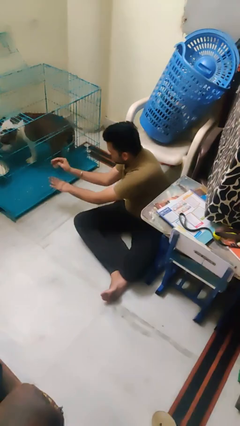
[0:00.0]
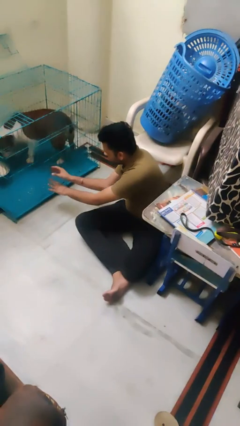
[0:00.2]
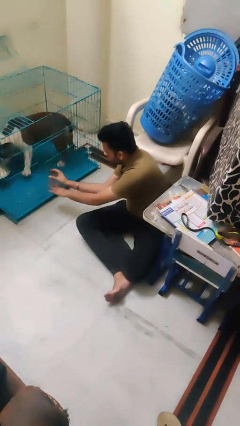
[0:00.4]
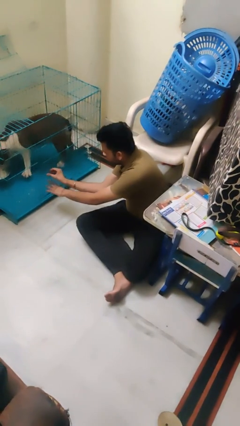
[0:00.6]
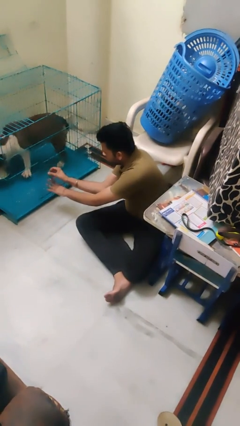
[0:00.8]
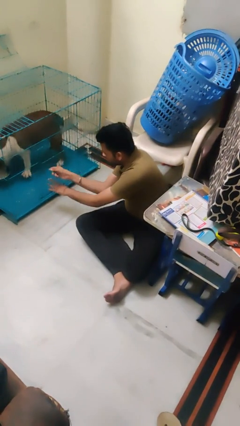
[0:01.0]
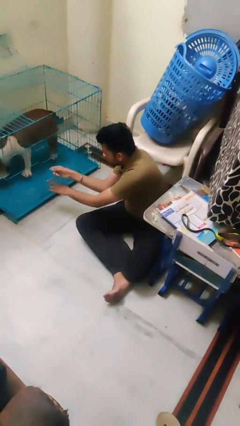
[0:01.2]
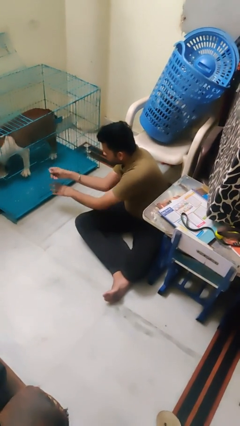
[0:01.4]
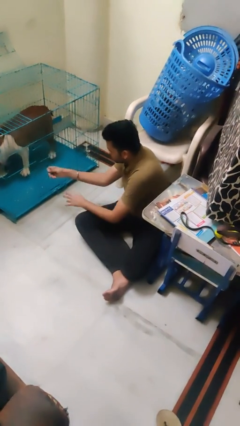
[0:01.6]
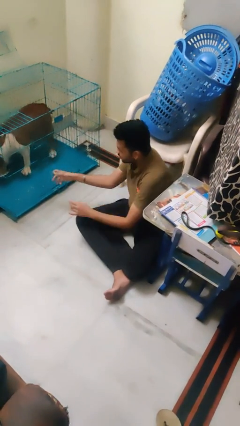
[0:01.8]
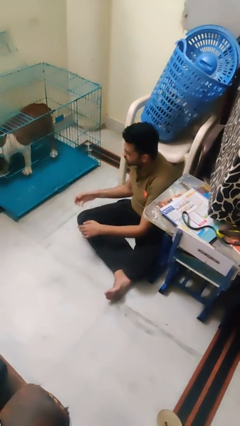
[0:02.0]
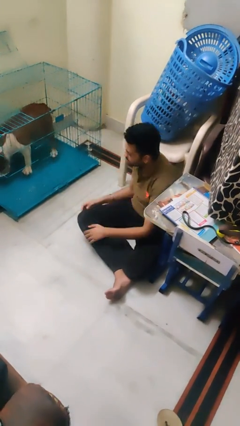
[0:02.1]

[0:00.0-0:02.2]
person crates dog

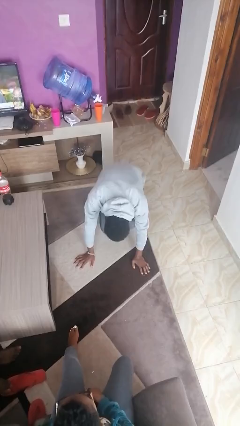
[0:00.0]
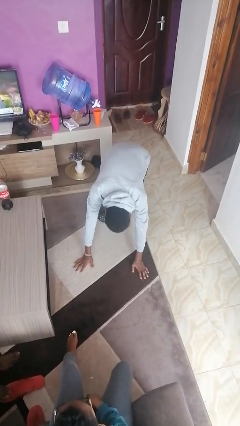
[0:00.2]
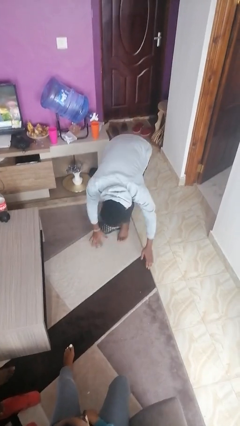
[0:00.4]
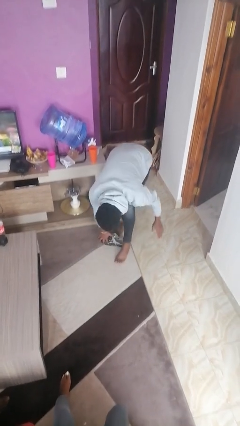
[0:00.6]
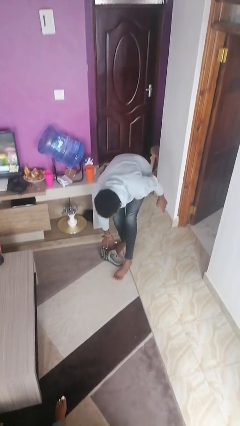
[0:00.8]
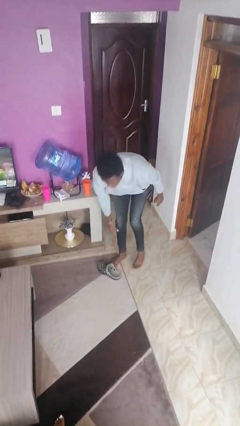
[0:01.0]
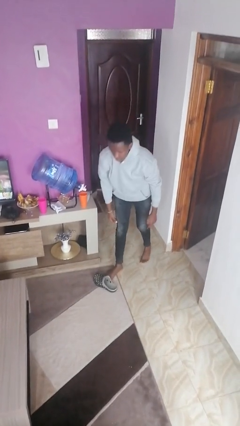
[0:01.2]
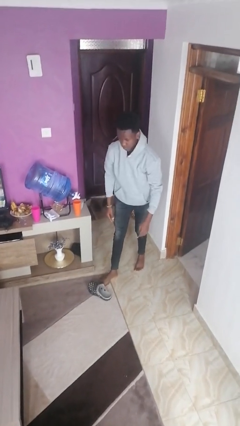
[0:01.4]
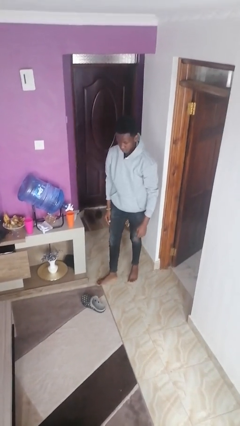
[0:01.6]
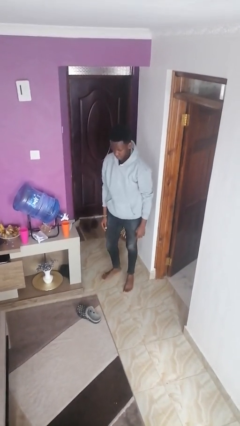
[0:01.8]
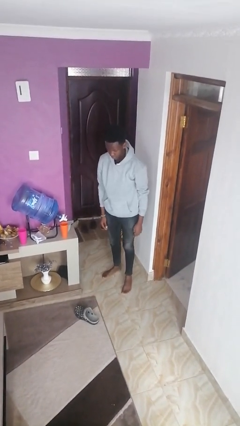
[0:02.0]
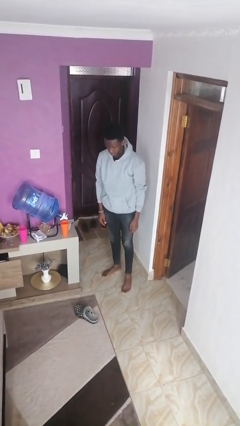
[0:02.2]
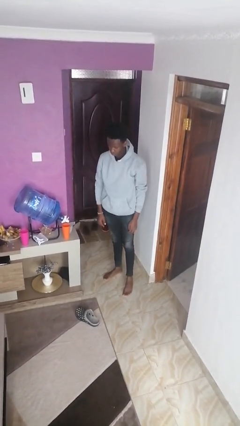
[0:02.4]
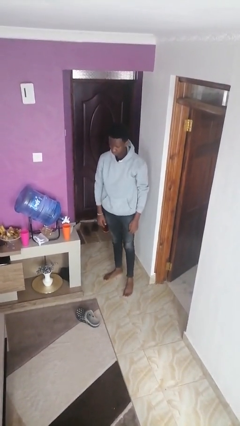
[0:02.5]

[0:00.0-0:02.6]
person stands up from floor

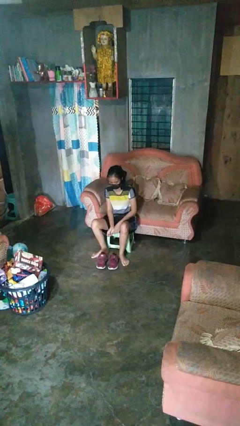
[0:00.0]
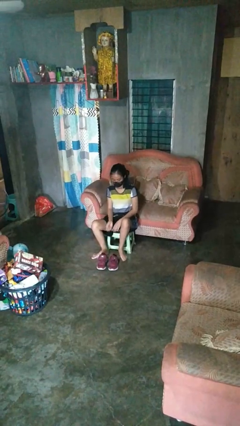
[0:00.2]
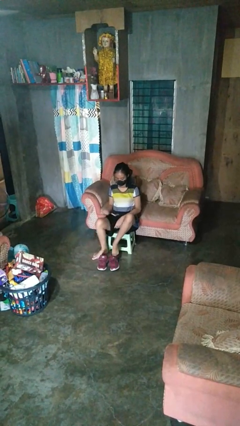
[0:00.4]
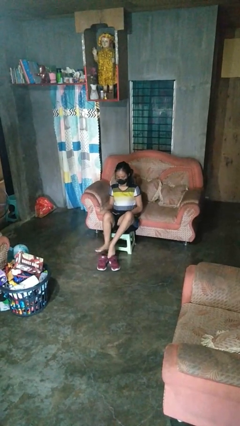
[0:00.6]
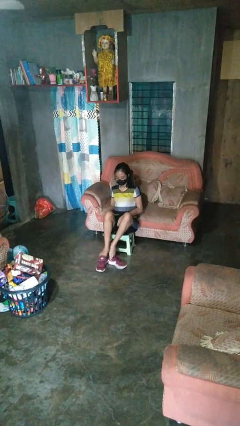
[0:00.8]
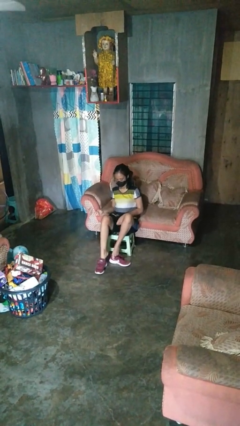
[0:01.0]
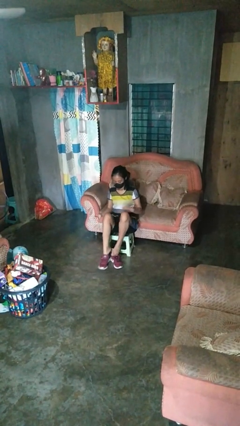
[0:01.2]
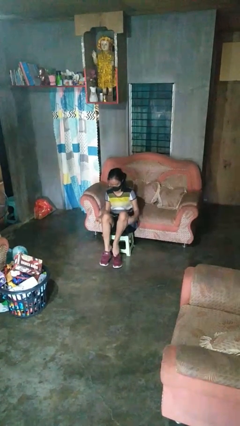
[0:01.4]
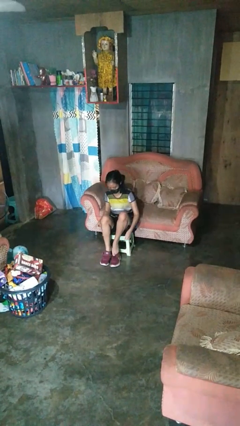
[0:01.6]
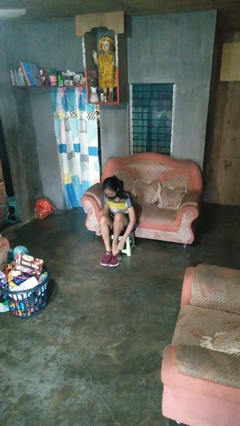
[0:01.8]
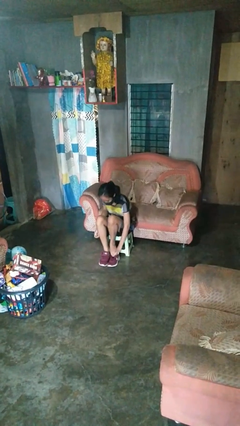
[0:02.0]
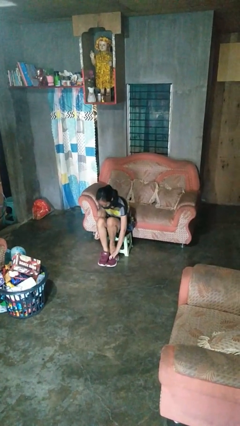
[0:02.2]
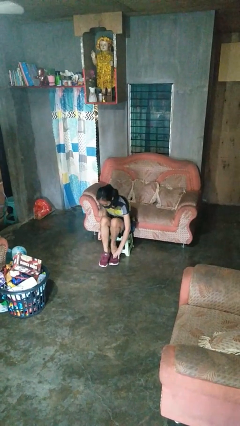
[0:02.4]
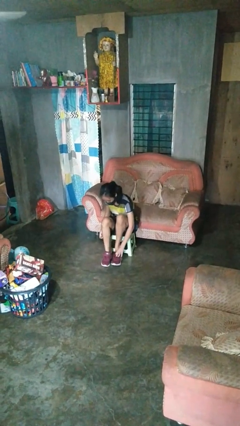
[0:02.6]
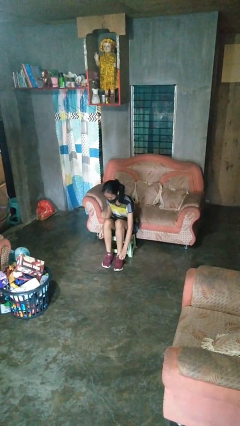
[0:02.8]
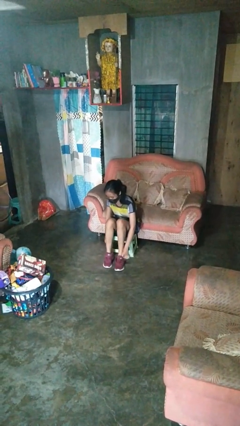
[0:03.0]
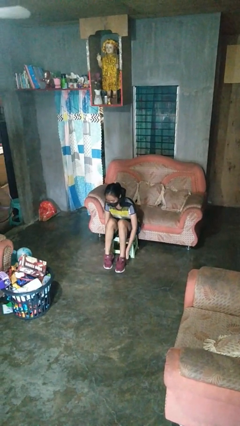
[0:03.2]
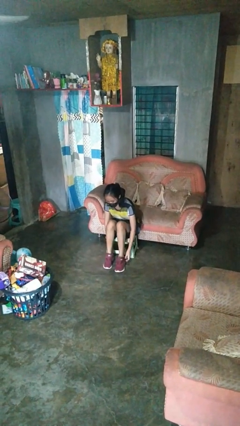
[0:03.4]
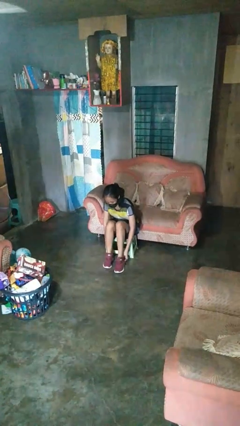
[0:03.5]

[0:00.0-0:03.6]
person puts on shoes

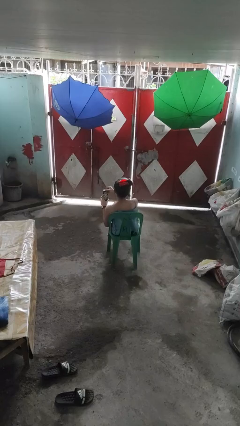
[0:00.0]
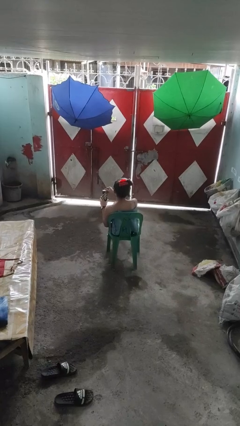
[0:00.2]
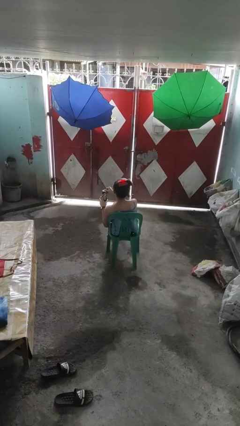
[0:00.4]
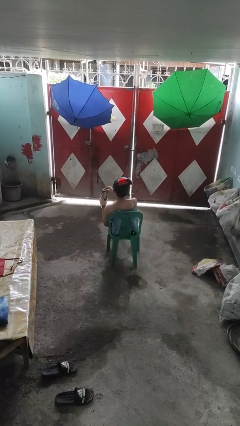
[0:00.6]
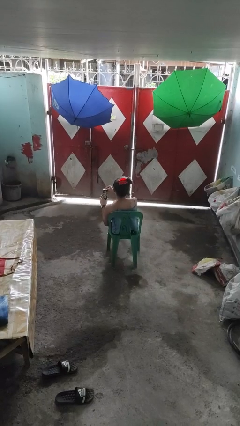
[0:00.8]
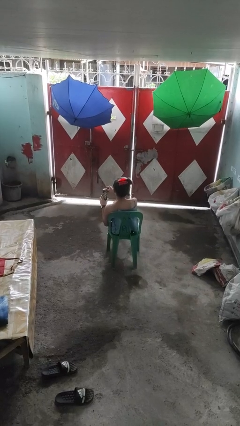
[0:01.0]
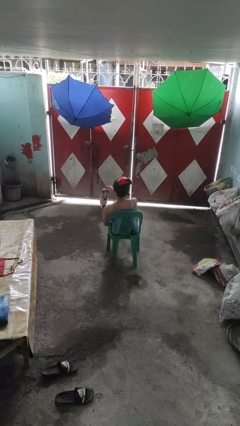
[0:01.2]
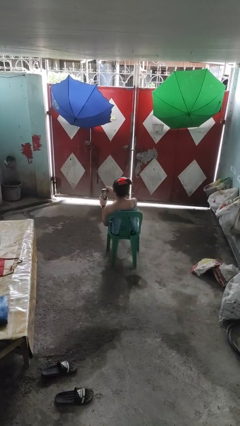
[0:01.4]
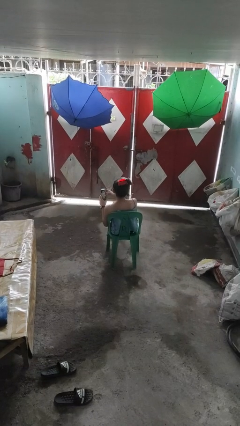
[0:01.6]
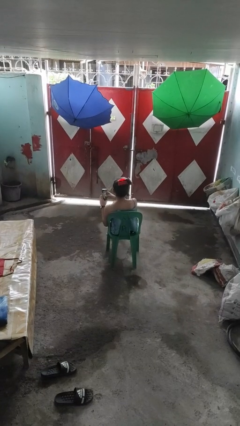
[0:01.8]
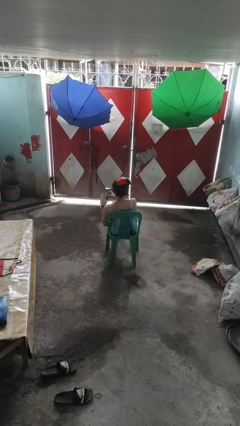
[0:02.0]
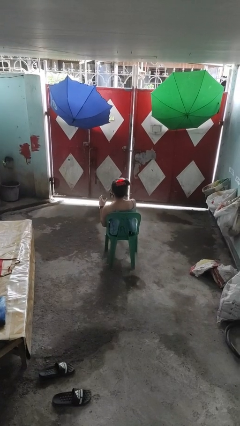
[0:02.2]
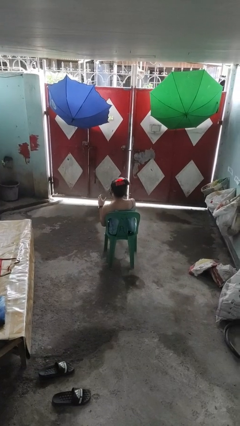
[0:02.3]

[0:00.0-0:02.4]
person opens beverage can

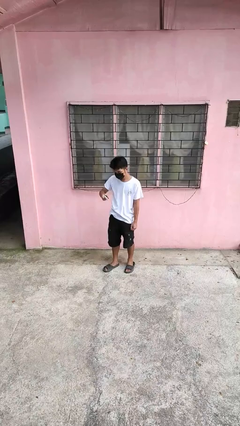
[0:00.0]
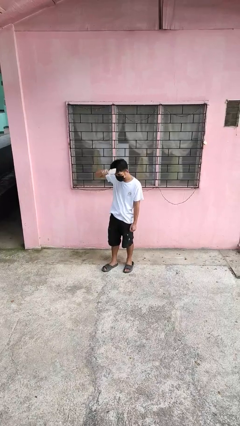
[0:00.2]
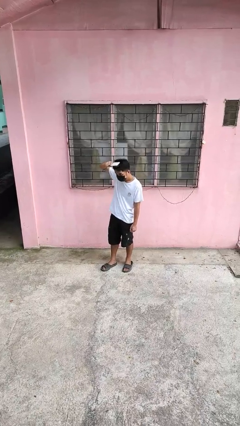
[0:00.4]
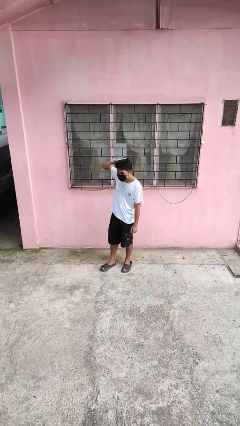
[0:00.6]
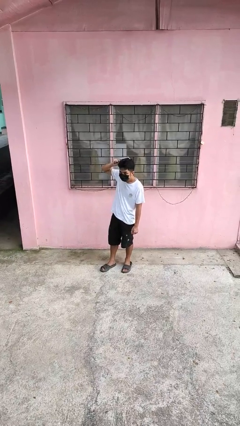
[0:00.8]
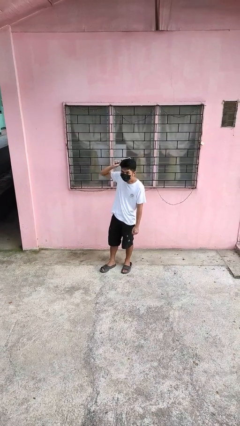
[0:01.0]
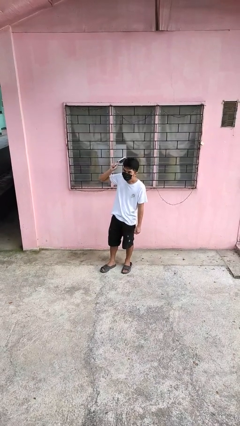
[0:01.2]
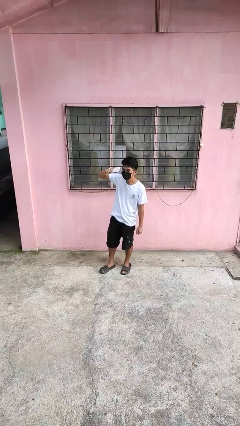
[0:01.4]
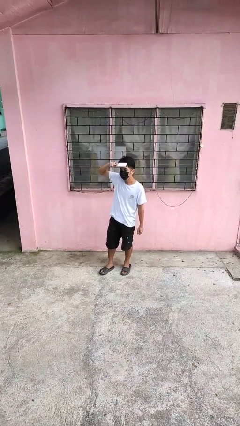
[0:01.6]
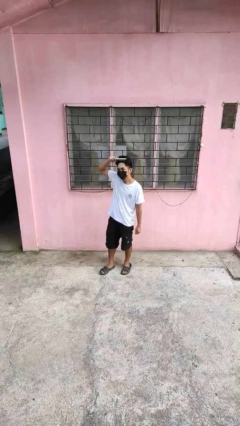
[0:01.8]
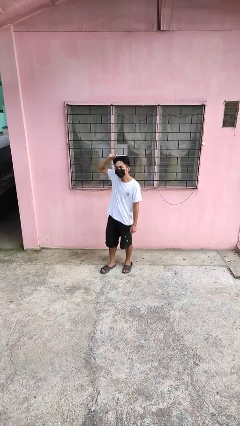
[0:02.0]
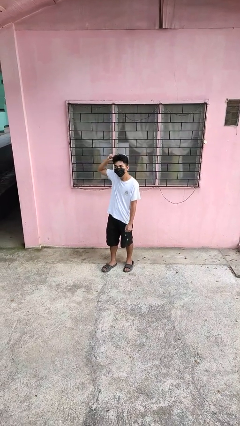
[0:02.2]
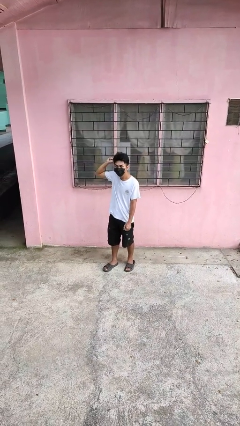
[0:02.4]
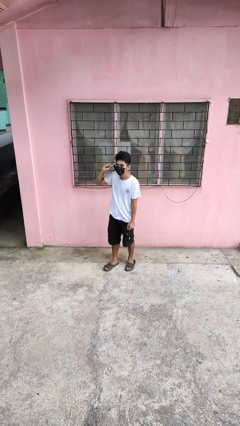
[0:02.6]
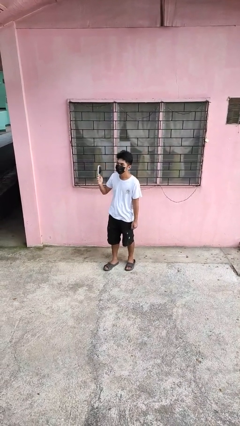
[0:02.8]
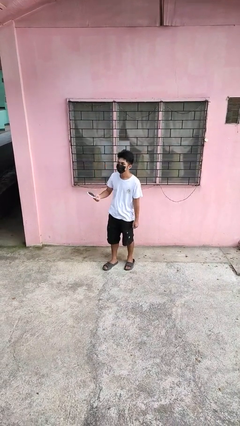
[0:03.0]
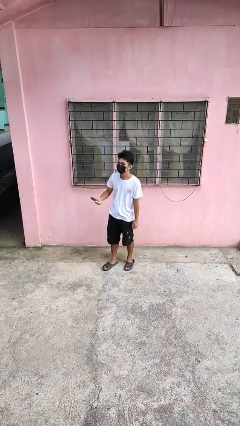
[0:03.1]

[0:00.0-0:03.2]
person brushes hair

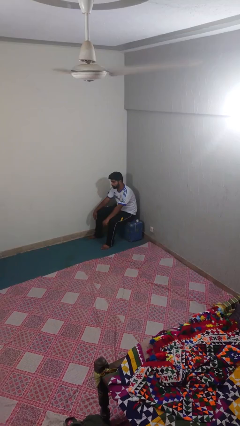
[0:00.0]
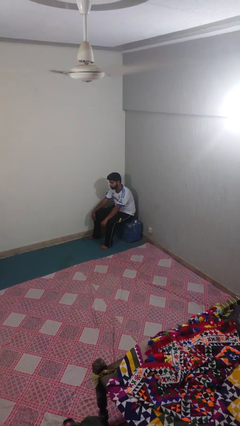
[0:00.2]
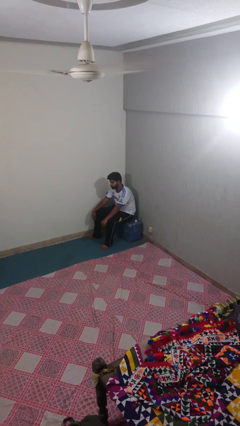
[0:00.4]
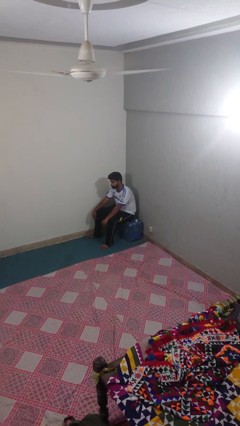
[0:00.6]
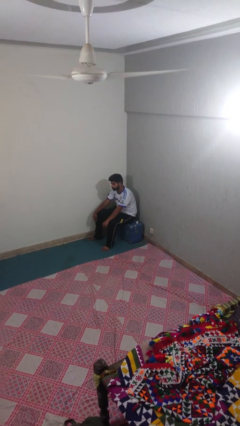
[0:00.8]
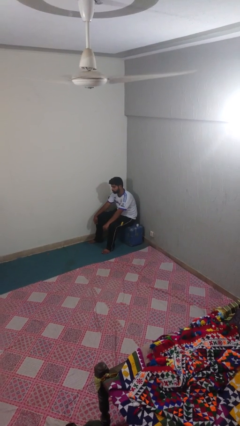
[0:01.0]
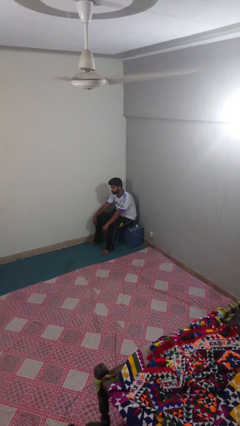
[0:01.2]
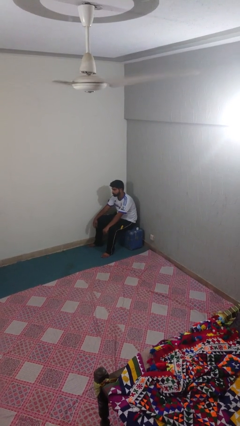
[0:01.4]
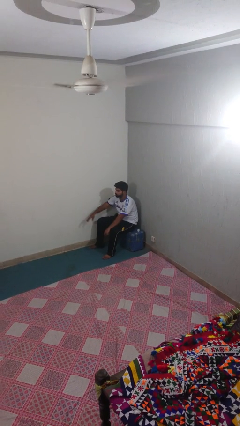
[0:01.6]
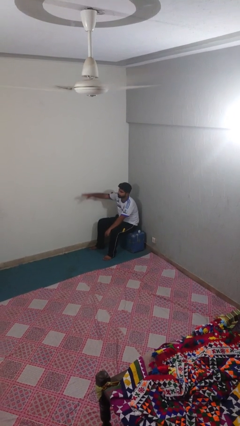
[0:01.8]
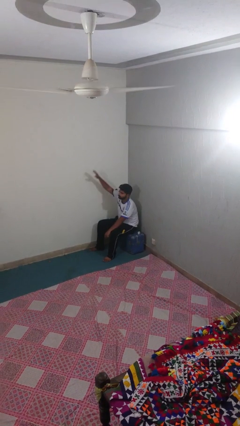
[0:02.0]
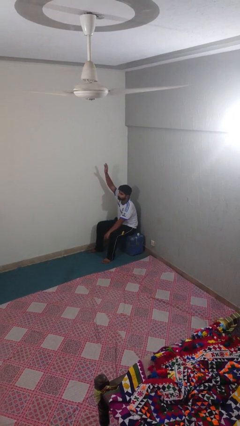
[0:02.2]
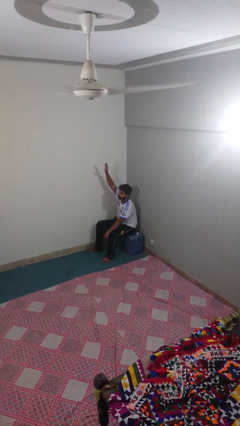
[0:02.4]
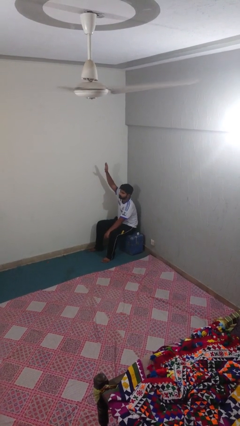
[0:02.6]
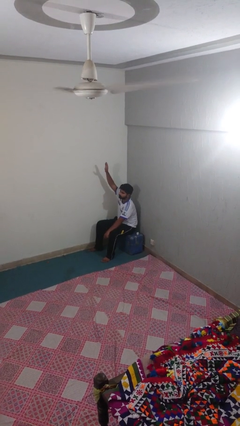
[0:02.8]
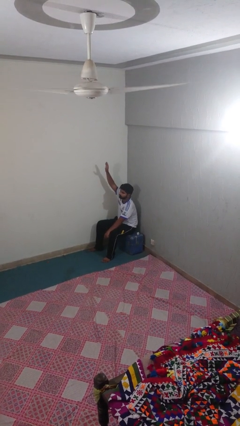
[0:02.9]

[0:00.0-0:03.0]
person gestures raise hand

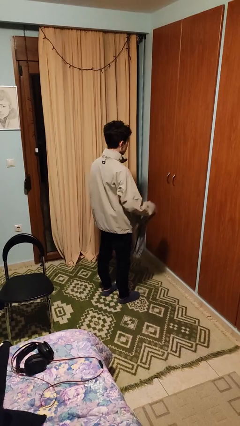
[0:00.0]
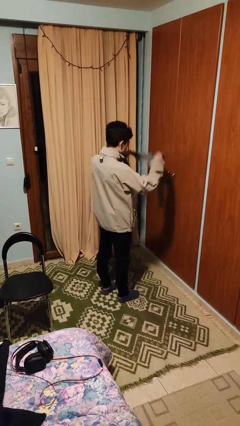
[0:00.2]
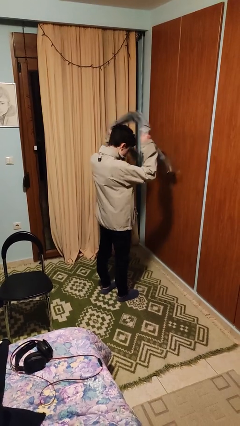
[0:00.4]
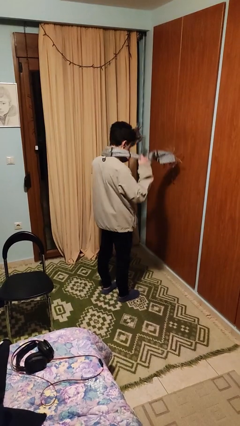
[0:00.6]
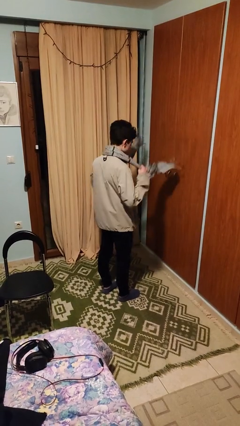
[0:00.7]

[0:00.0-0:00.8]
person puts on scarf
